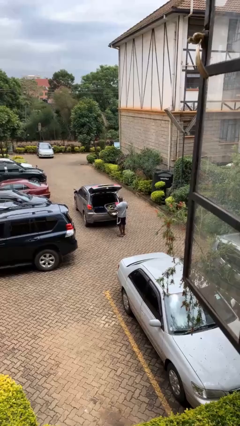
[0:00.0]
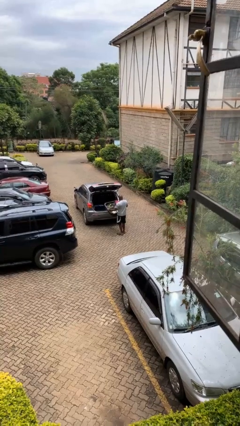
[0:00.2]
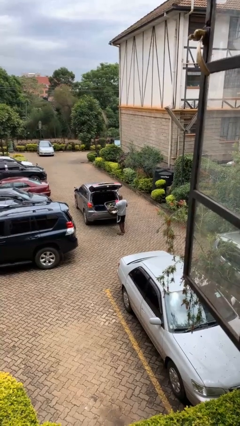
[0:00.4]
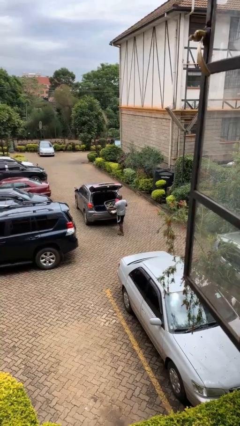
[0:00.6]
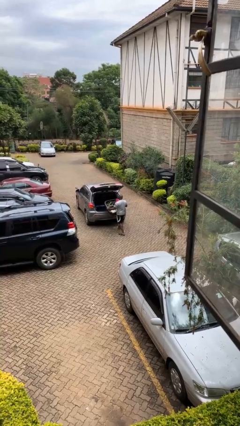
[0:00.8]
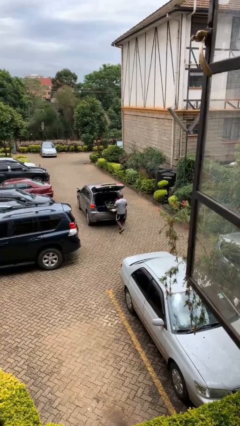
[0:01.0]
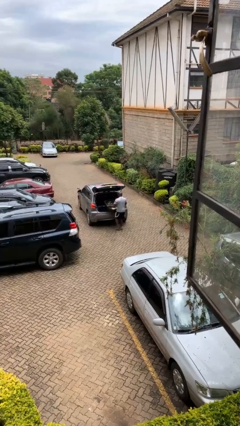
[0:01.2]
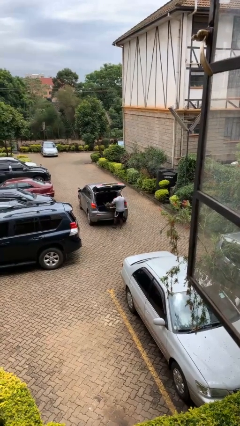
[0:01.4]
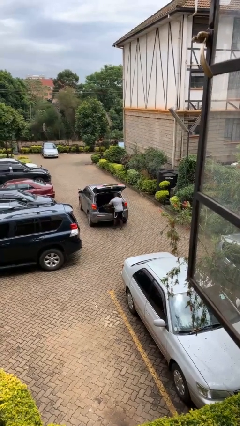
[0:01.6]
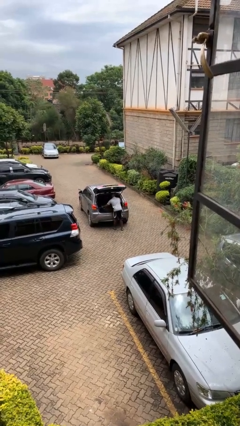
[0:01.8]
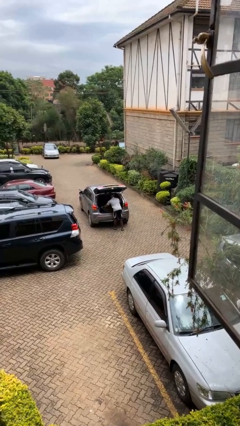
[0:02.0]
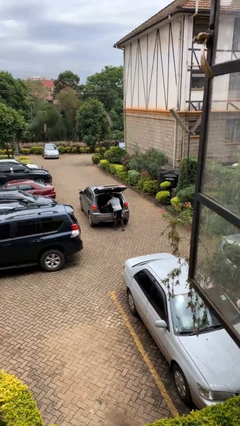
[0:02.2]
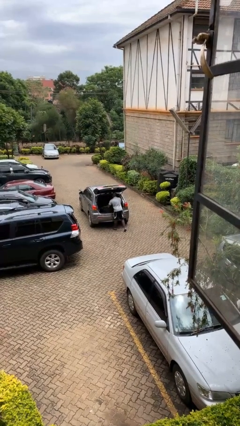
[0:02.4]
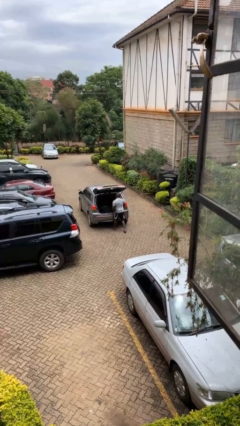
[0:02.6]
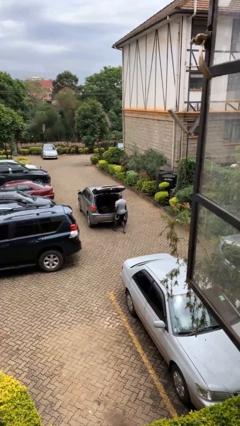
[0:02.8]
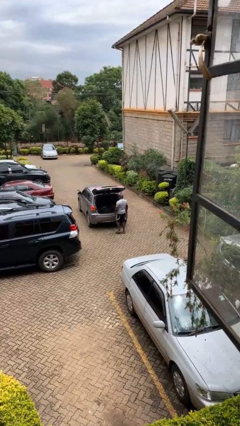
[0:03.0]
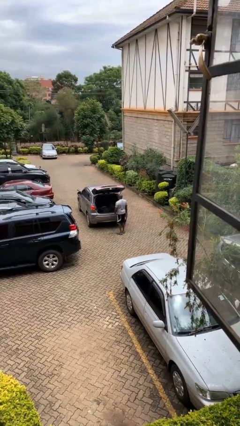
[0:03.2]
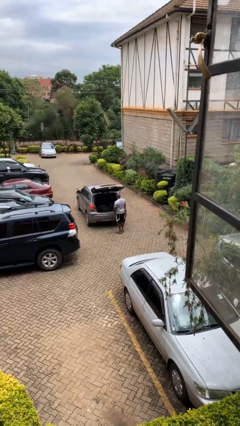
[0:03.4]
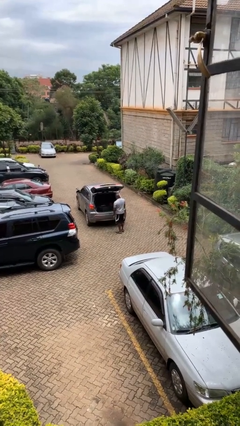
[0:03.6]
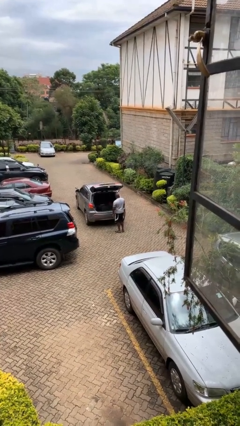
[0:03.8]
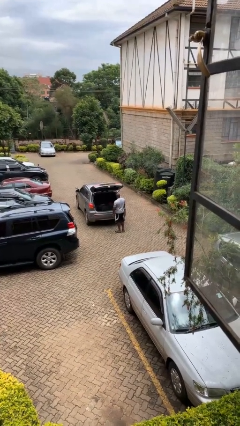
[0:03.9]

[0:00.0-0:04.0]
person loads car

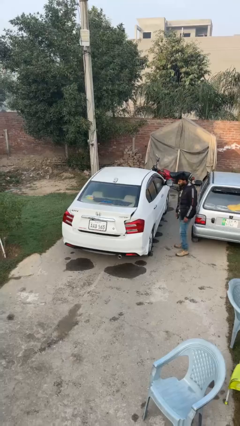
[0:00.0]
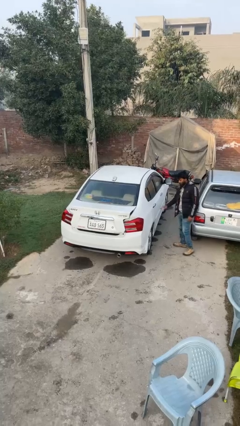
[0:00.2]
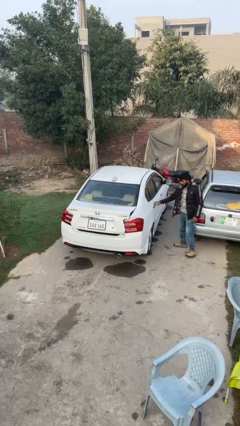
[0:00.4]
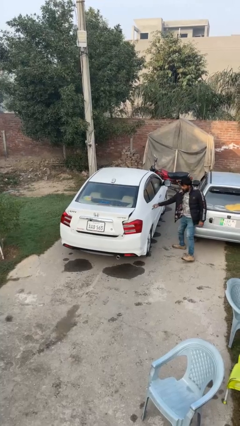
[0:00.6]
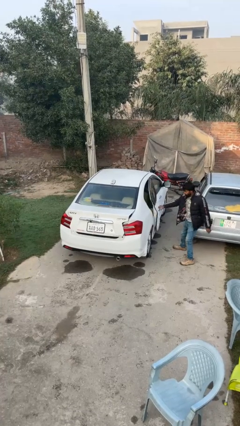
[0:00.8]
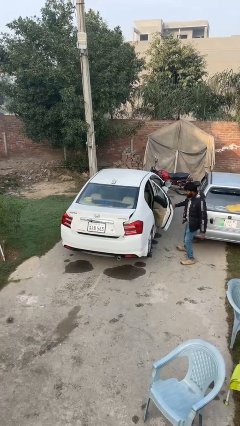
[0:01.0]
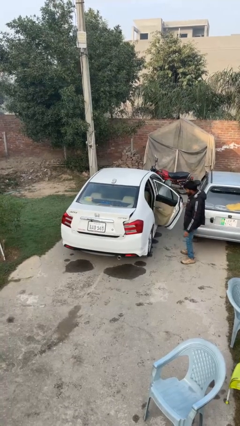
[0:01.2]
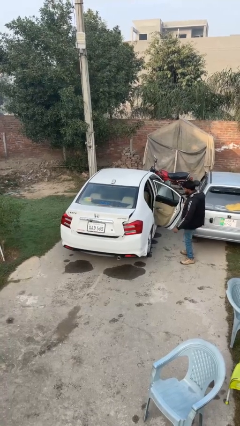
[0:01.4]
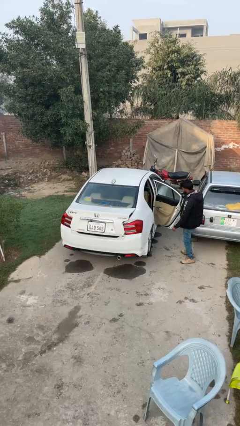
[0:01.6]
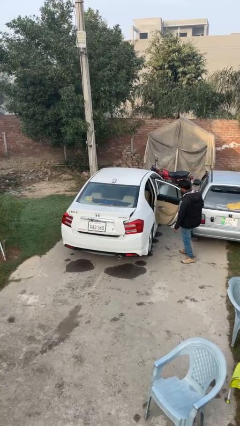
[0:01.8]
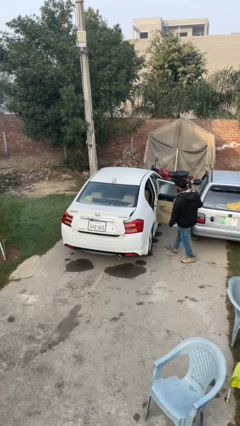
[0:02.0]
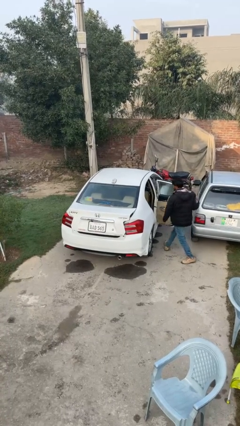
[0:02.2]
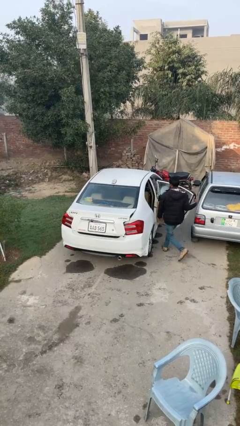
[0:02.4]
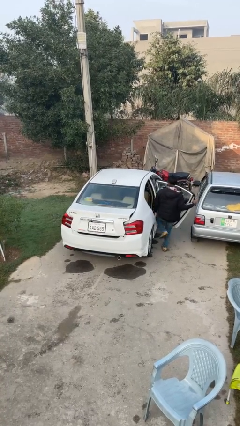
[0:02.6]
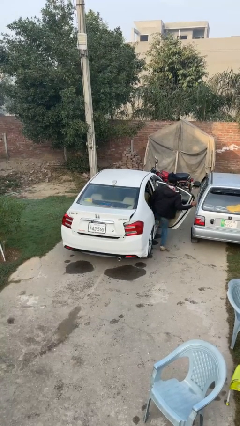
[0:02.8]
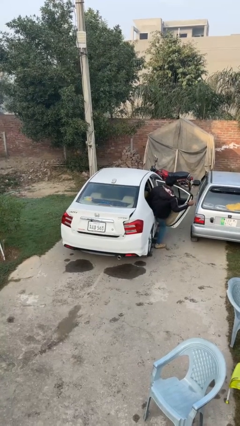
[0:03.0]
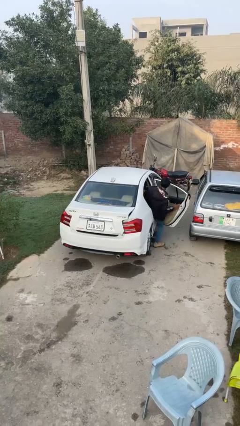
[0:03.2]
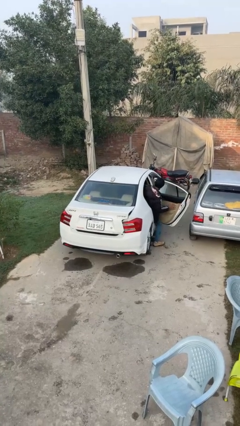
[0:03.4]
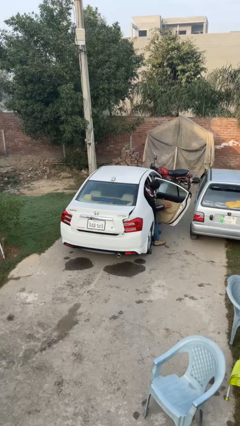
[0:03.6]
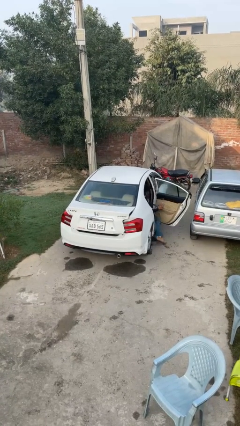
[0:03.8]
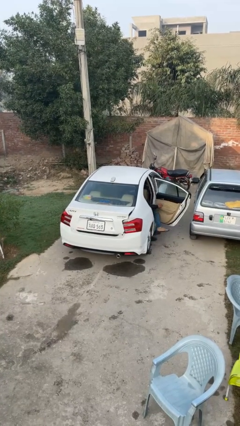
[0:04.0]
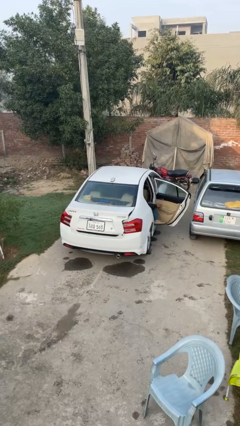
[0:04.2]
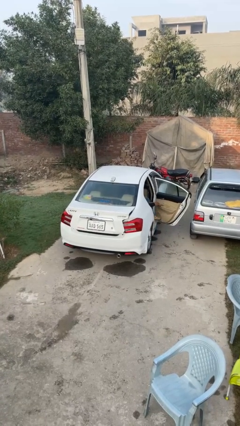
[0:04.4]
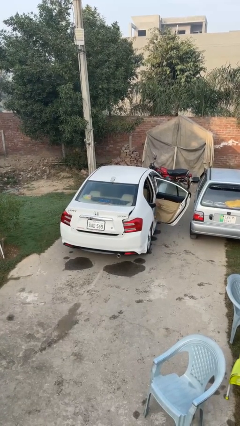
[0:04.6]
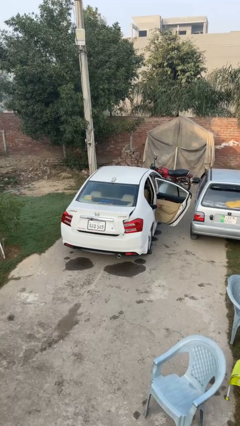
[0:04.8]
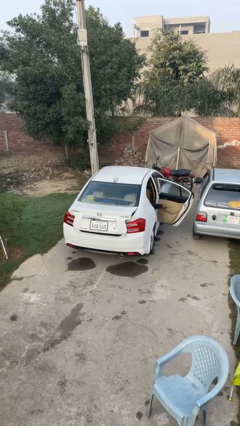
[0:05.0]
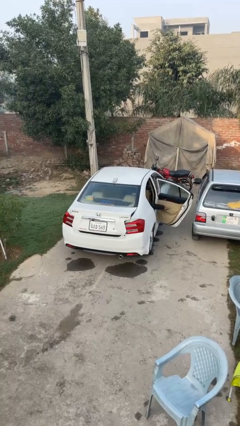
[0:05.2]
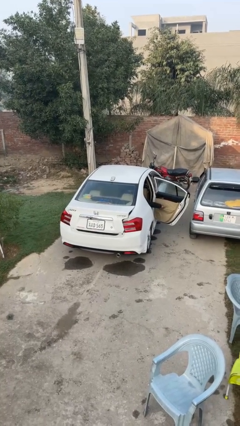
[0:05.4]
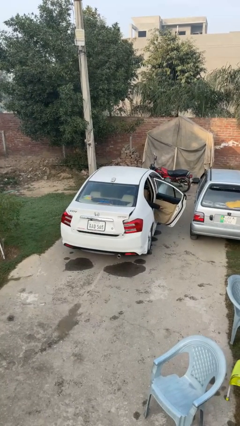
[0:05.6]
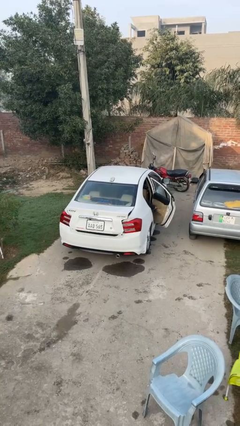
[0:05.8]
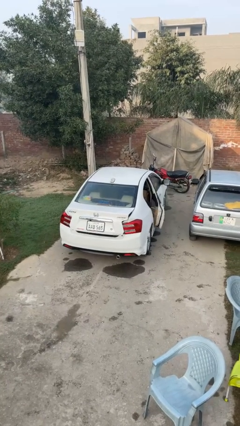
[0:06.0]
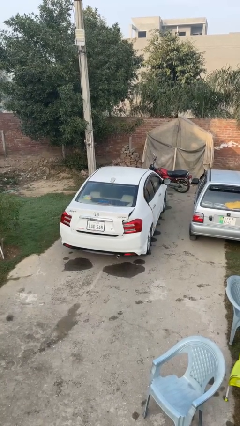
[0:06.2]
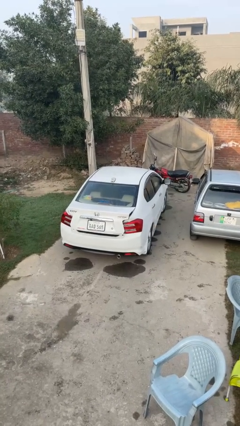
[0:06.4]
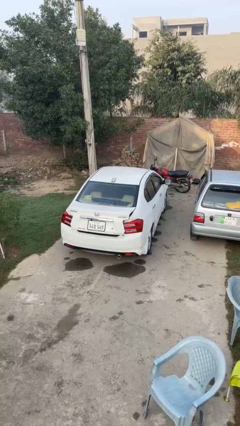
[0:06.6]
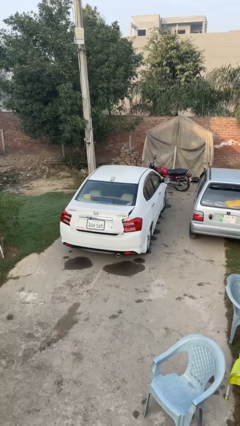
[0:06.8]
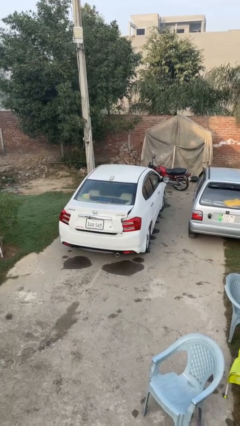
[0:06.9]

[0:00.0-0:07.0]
car picks up person

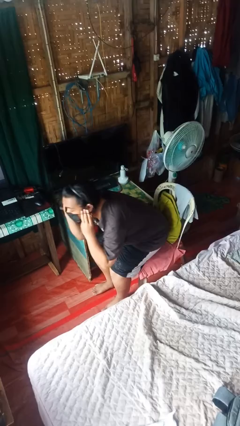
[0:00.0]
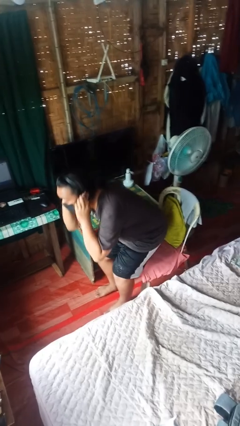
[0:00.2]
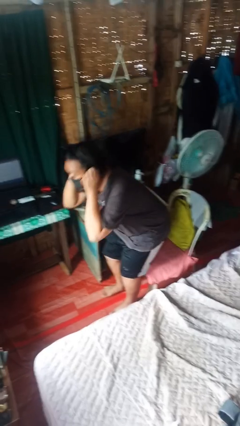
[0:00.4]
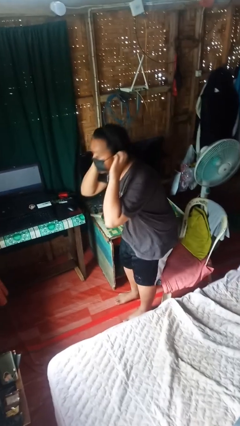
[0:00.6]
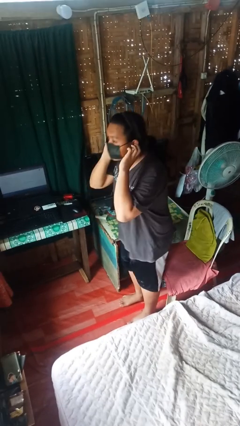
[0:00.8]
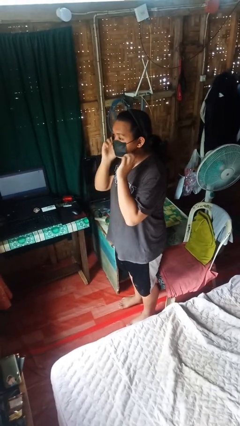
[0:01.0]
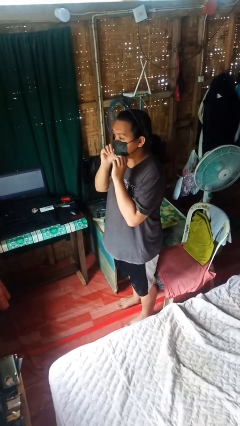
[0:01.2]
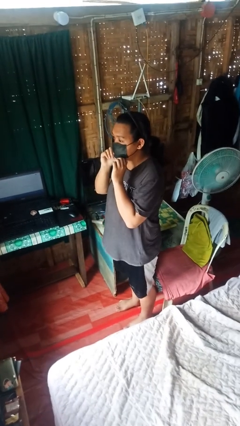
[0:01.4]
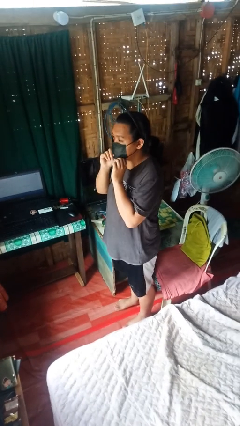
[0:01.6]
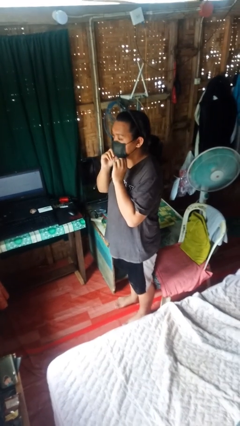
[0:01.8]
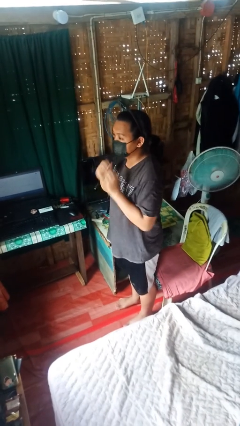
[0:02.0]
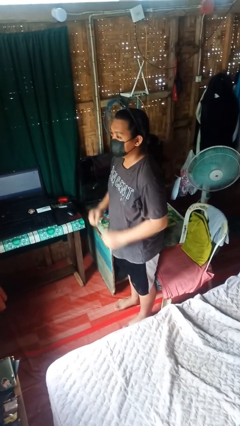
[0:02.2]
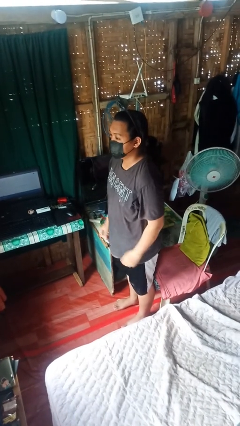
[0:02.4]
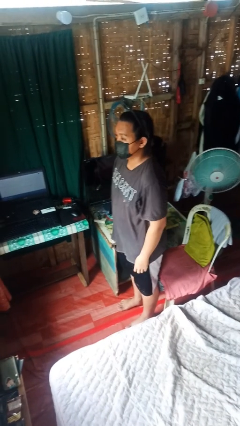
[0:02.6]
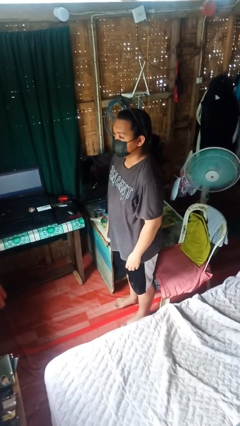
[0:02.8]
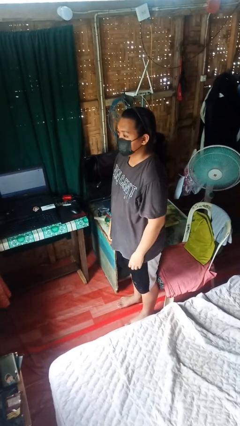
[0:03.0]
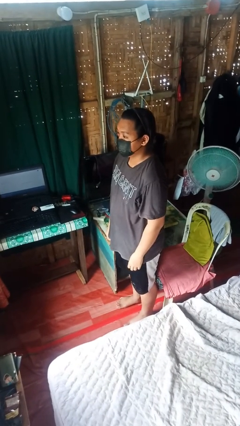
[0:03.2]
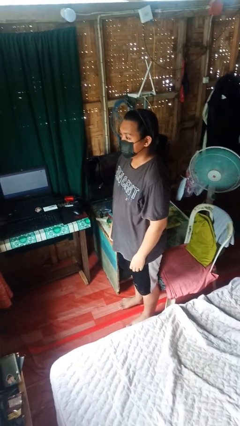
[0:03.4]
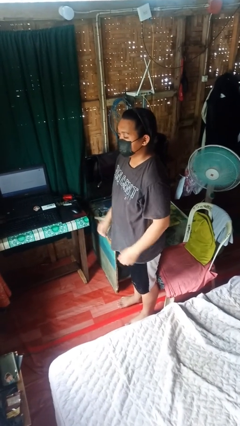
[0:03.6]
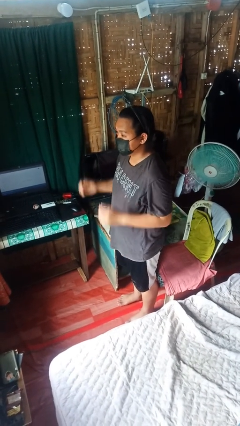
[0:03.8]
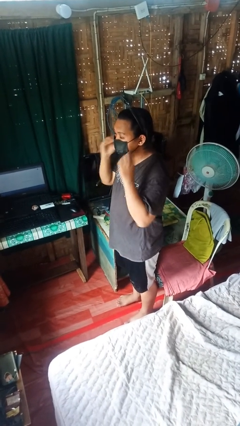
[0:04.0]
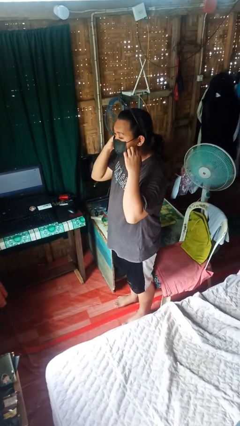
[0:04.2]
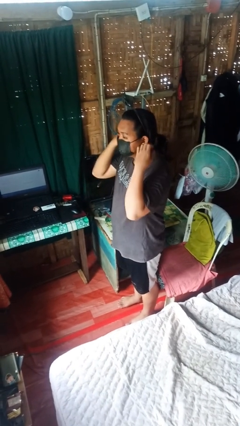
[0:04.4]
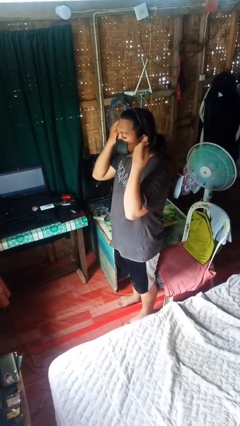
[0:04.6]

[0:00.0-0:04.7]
person puts on facemask

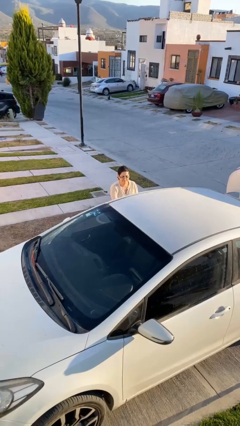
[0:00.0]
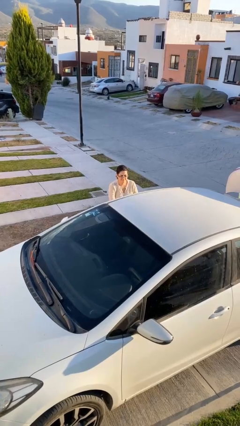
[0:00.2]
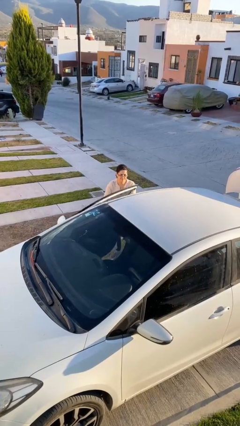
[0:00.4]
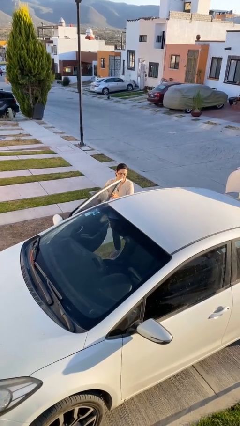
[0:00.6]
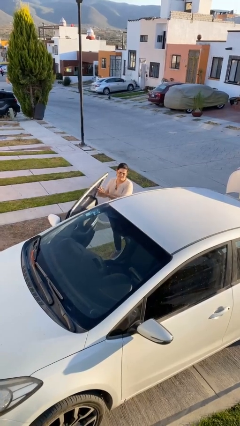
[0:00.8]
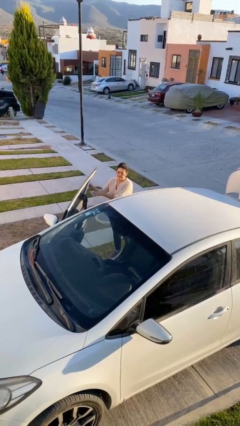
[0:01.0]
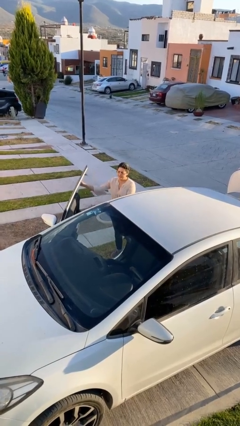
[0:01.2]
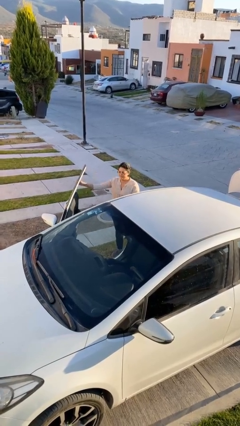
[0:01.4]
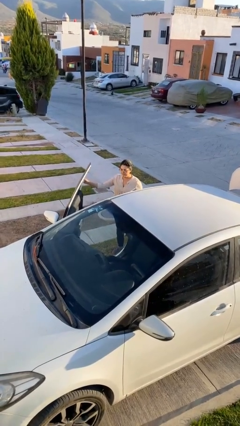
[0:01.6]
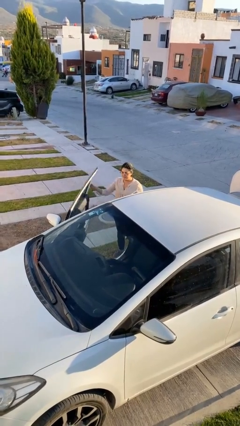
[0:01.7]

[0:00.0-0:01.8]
person opens car door
